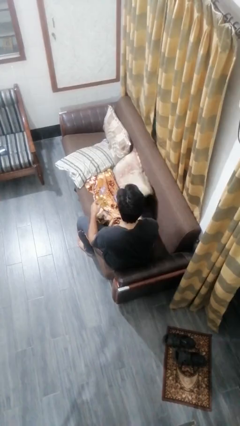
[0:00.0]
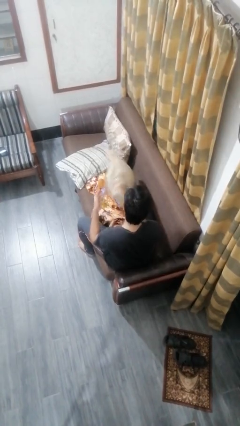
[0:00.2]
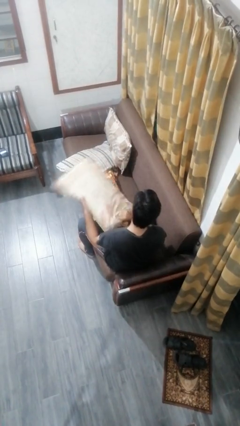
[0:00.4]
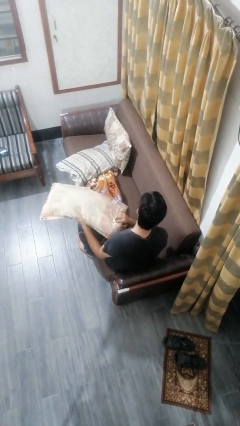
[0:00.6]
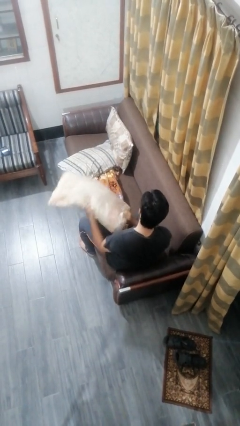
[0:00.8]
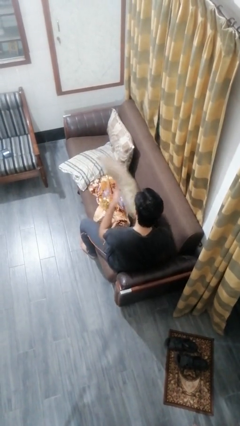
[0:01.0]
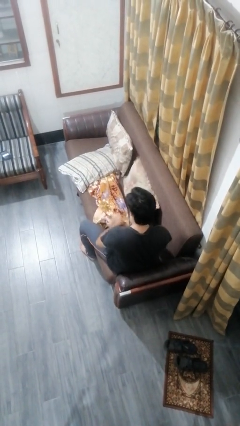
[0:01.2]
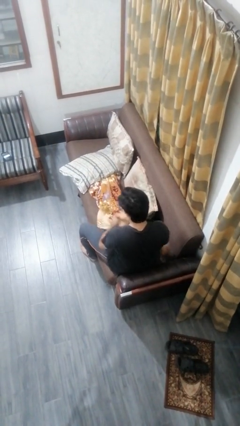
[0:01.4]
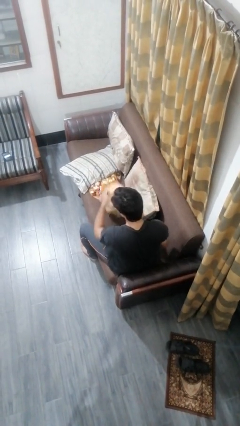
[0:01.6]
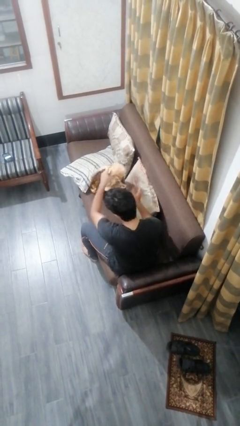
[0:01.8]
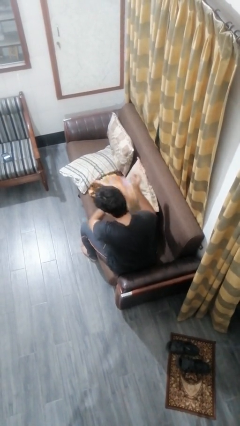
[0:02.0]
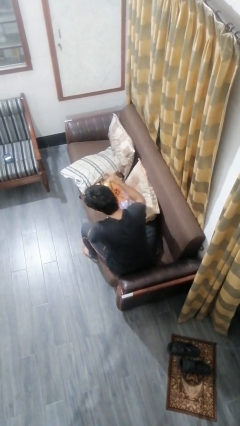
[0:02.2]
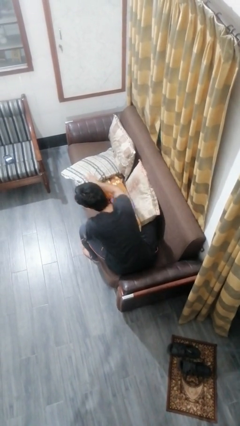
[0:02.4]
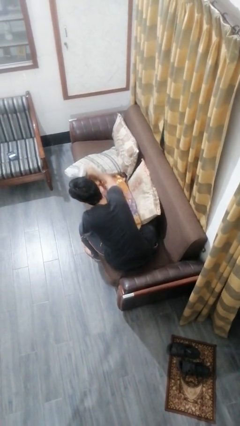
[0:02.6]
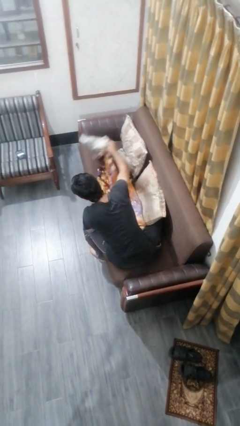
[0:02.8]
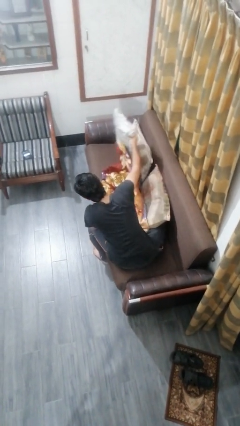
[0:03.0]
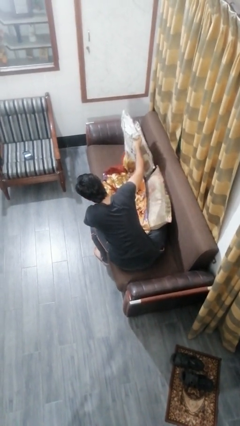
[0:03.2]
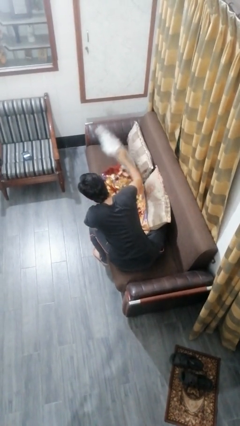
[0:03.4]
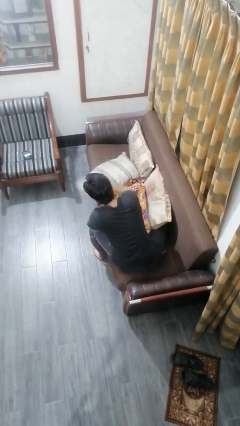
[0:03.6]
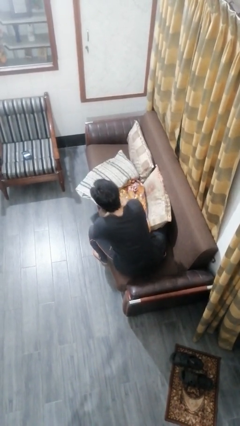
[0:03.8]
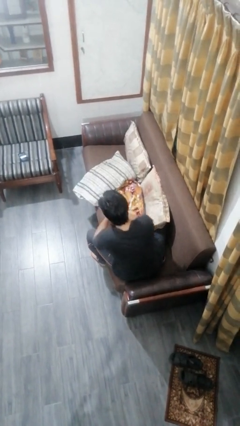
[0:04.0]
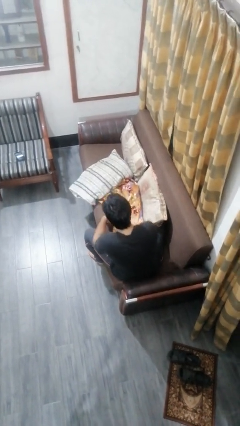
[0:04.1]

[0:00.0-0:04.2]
person searches in couch

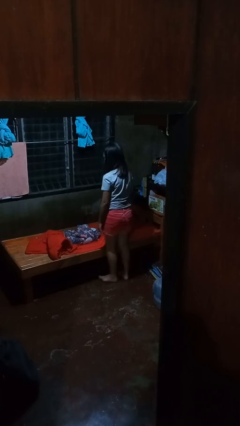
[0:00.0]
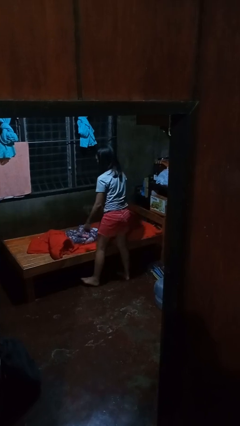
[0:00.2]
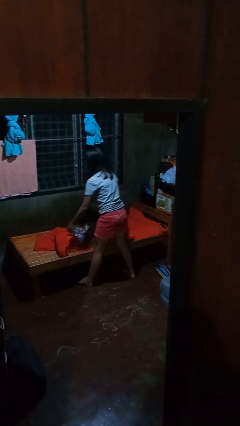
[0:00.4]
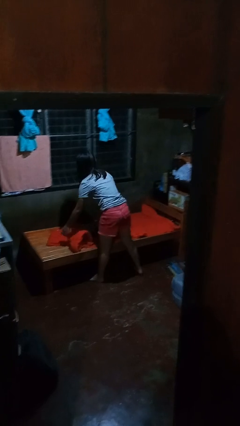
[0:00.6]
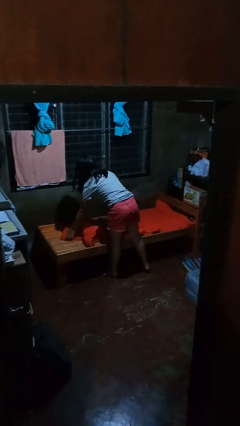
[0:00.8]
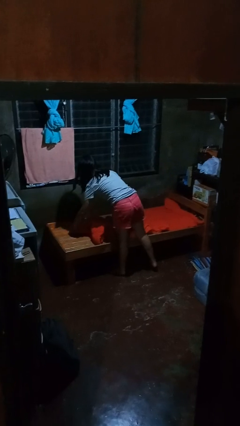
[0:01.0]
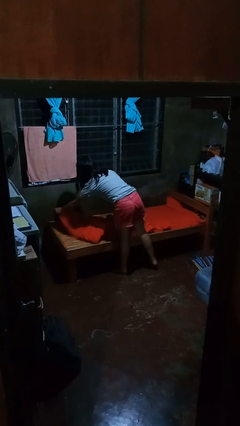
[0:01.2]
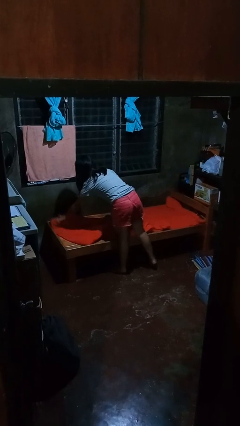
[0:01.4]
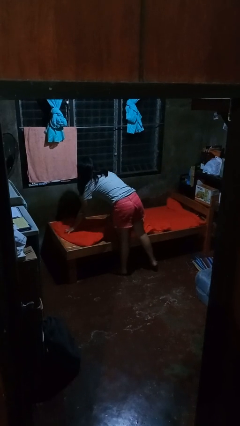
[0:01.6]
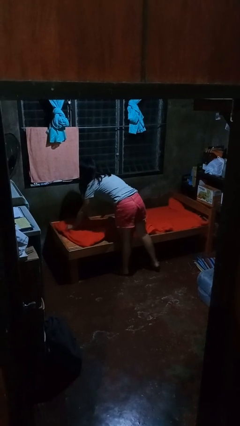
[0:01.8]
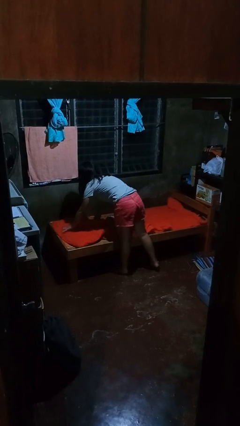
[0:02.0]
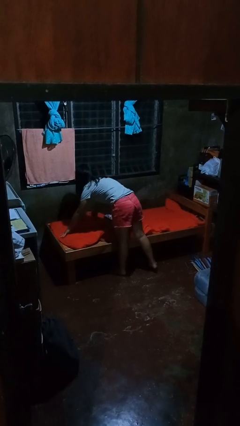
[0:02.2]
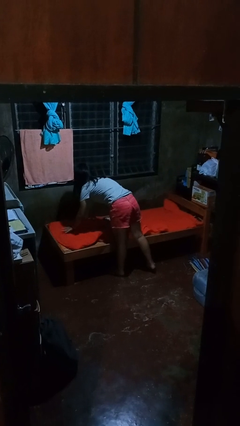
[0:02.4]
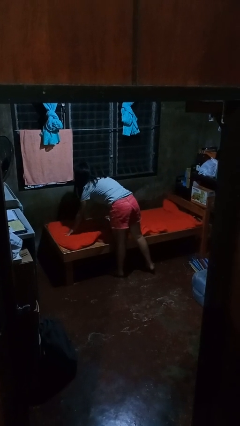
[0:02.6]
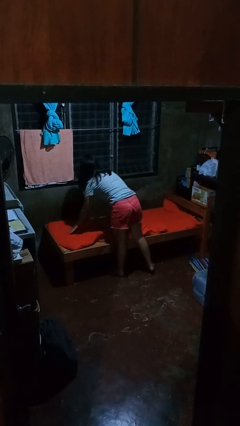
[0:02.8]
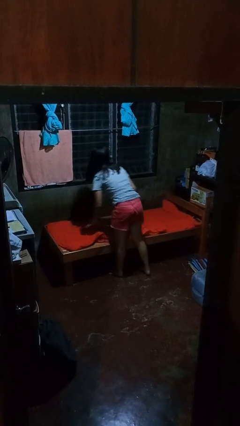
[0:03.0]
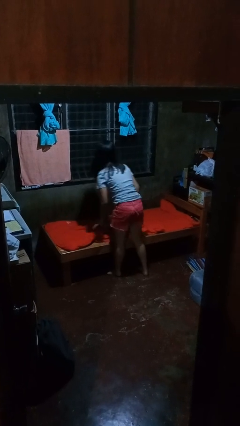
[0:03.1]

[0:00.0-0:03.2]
person makes bed

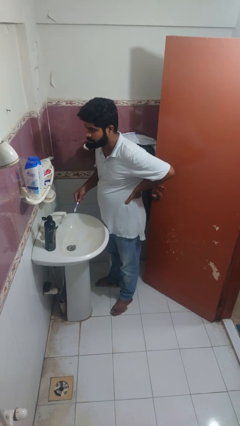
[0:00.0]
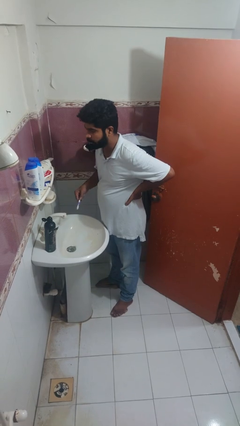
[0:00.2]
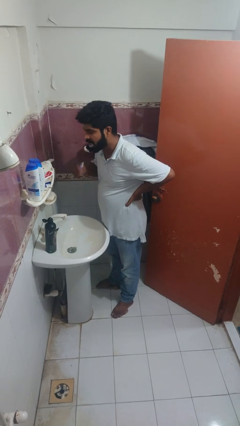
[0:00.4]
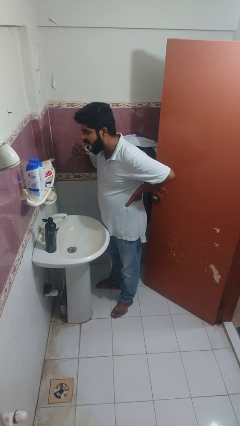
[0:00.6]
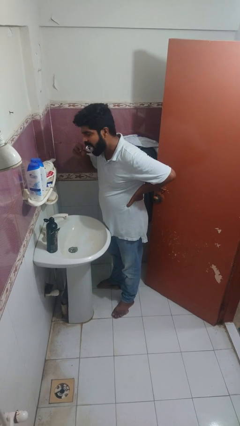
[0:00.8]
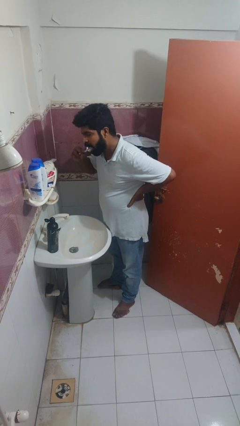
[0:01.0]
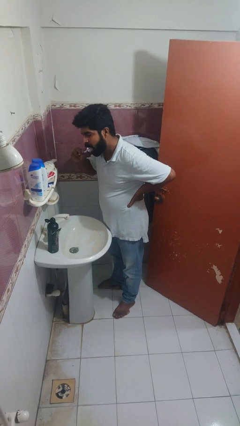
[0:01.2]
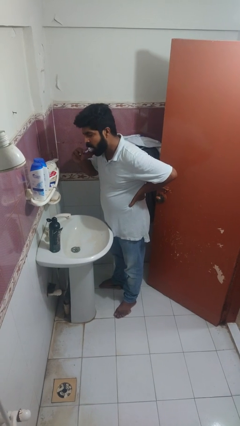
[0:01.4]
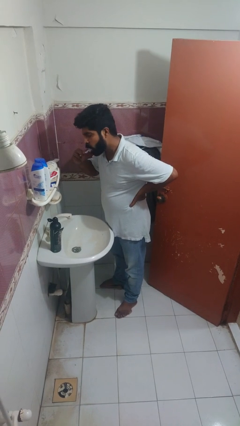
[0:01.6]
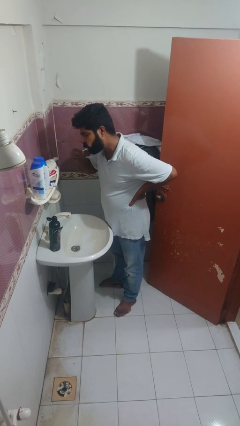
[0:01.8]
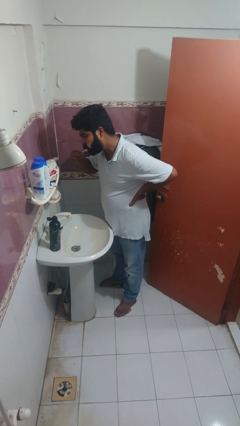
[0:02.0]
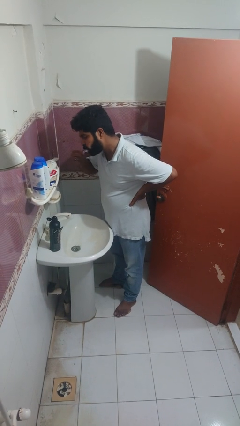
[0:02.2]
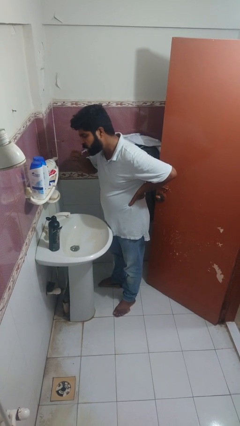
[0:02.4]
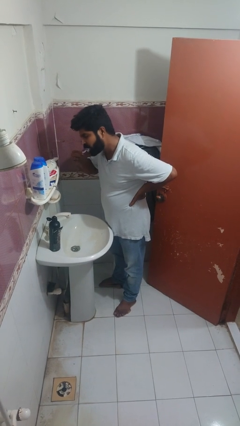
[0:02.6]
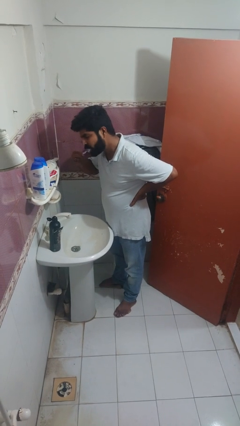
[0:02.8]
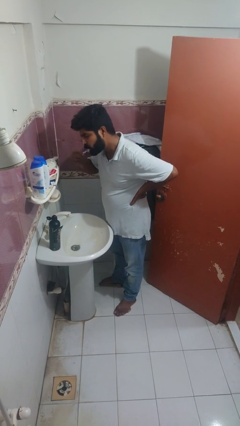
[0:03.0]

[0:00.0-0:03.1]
person brushes teeth

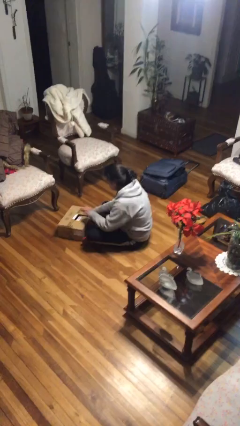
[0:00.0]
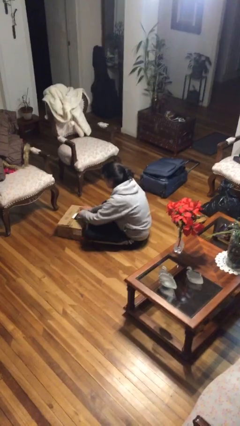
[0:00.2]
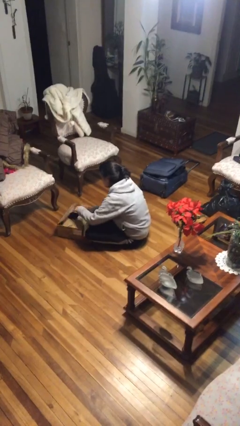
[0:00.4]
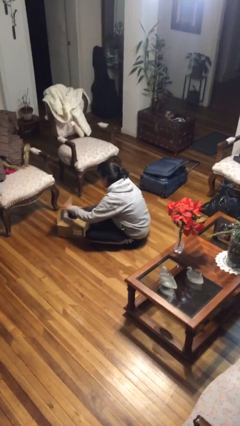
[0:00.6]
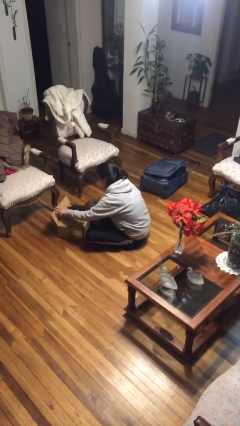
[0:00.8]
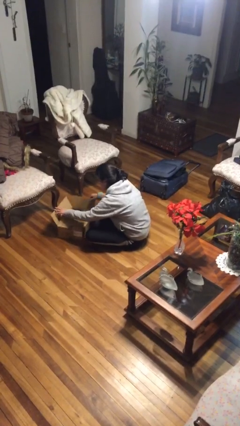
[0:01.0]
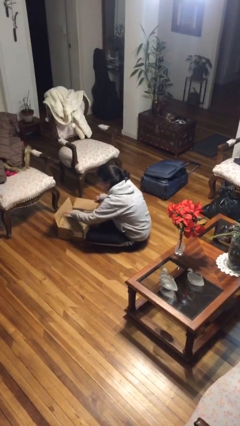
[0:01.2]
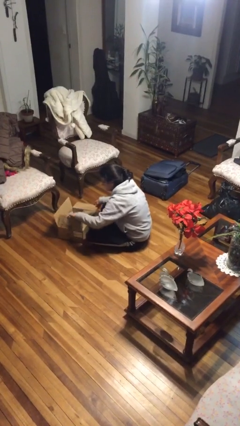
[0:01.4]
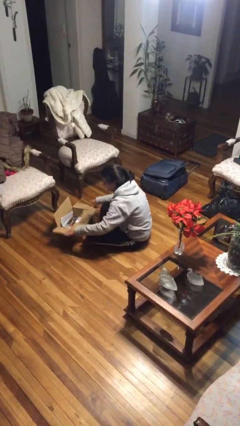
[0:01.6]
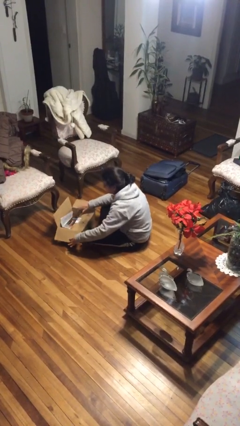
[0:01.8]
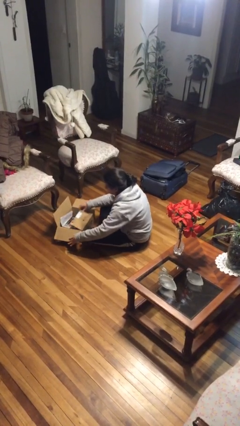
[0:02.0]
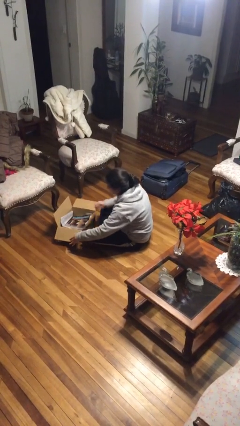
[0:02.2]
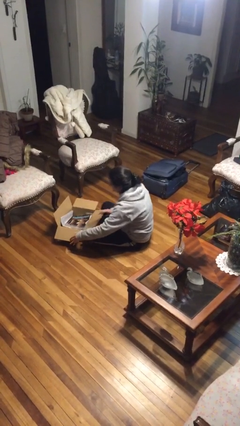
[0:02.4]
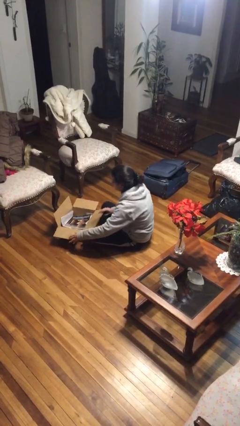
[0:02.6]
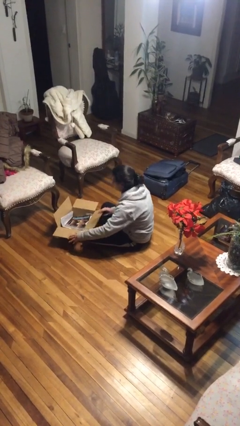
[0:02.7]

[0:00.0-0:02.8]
person opens box

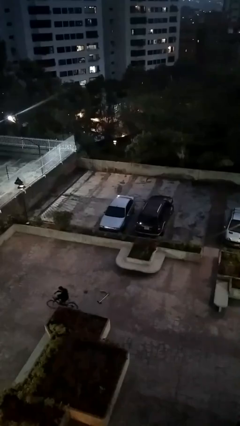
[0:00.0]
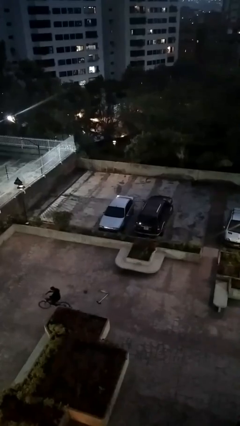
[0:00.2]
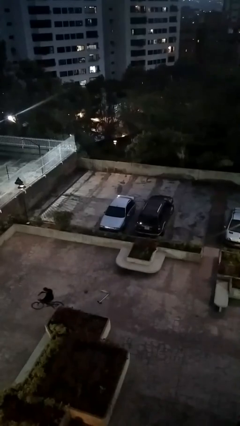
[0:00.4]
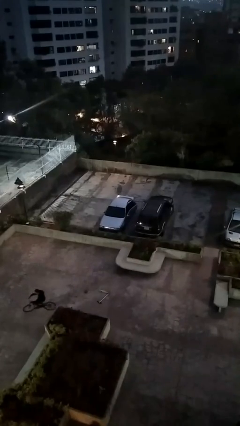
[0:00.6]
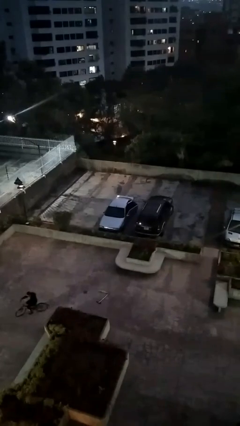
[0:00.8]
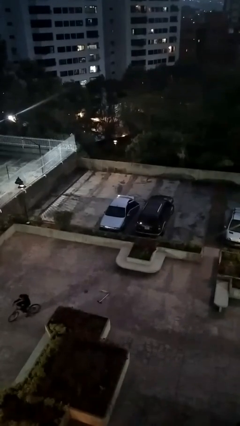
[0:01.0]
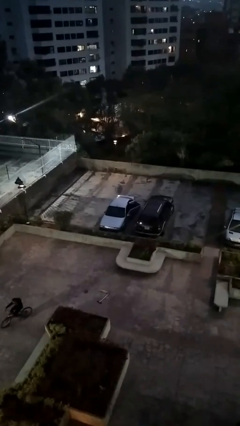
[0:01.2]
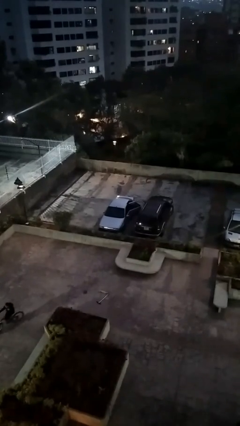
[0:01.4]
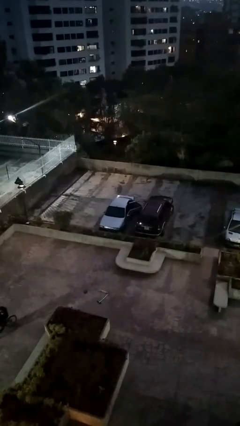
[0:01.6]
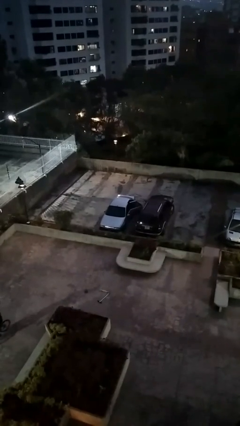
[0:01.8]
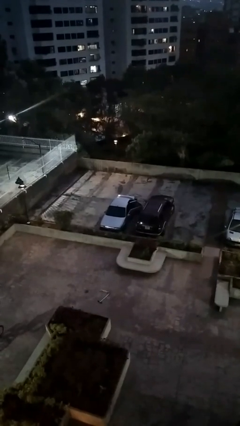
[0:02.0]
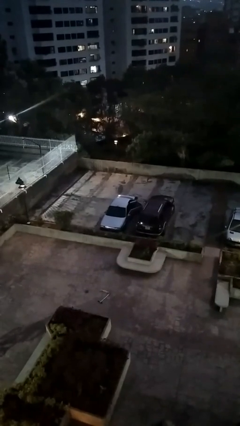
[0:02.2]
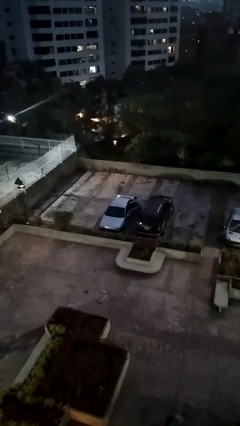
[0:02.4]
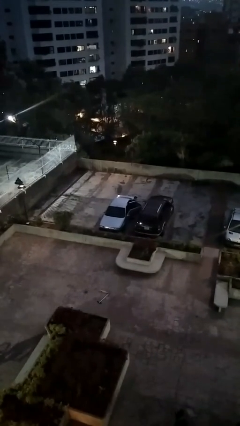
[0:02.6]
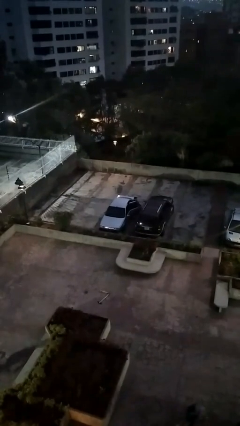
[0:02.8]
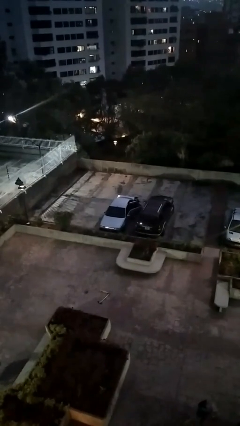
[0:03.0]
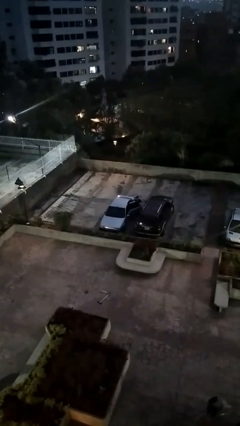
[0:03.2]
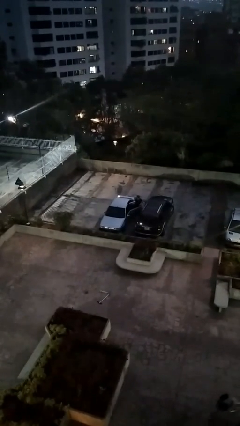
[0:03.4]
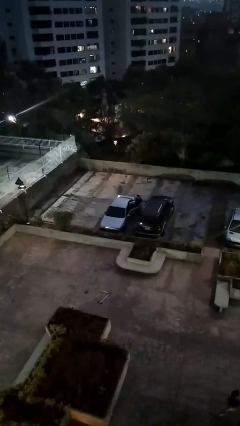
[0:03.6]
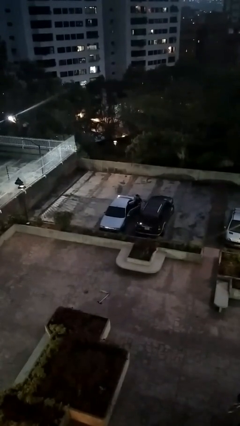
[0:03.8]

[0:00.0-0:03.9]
car drops off person

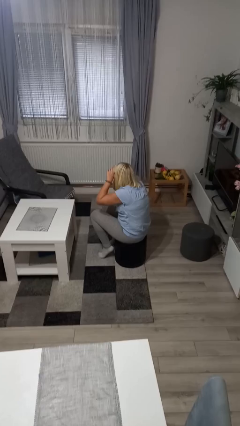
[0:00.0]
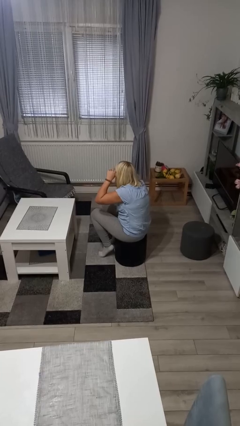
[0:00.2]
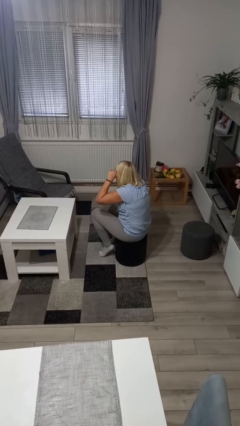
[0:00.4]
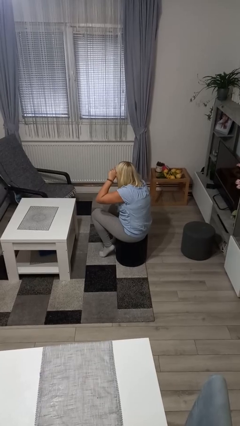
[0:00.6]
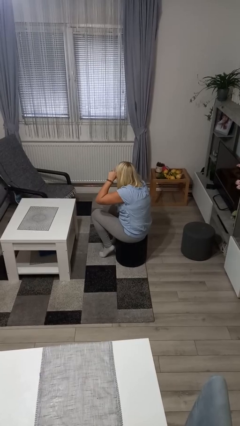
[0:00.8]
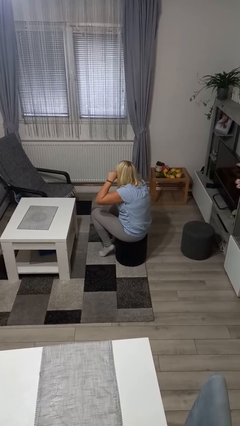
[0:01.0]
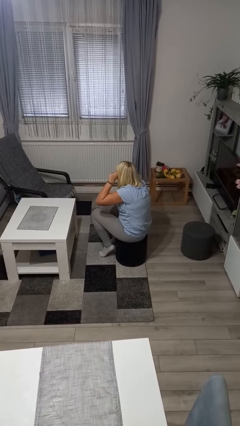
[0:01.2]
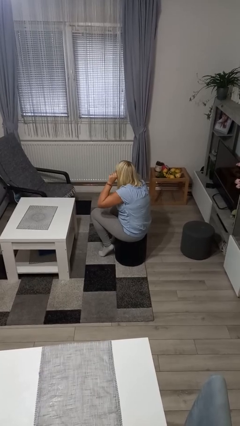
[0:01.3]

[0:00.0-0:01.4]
person rubs eyes
